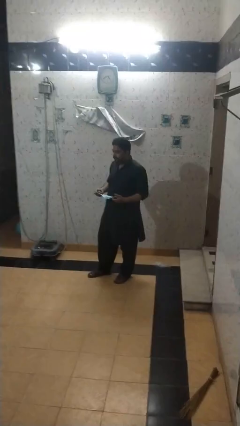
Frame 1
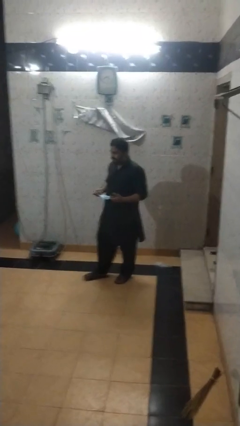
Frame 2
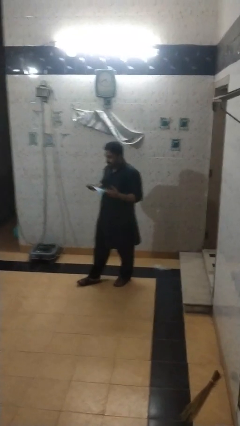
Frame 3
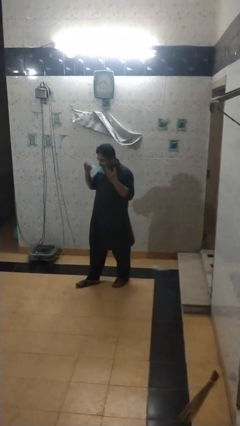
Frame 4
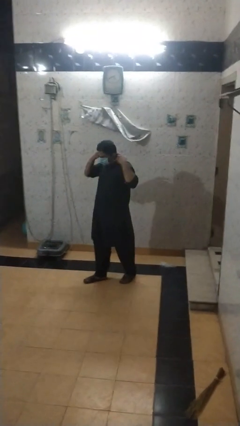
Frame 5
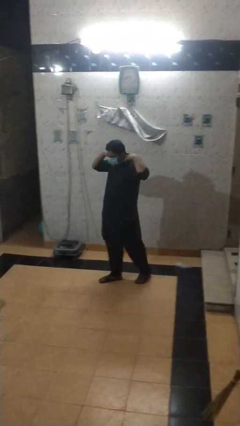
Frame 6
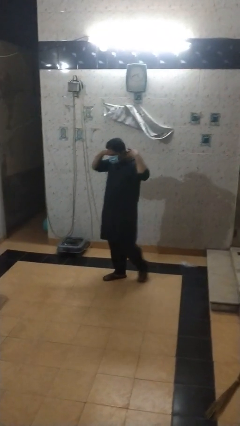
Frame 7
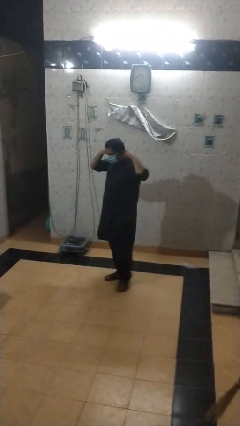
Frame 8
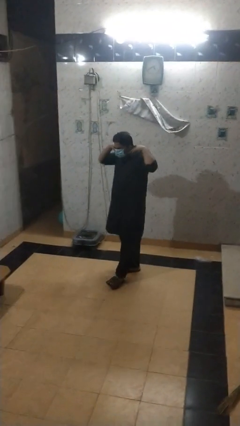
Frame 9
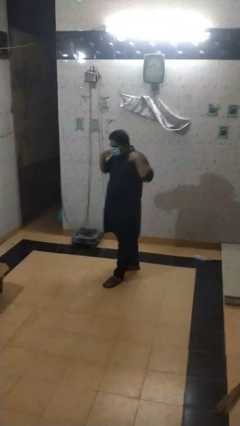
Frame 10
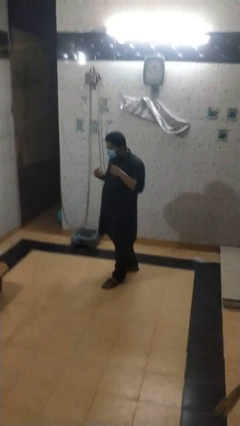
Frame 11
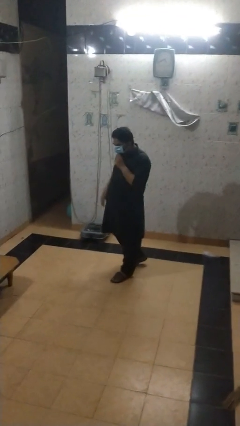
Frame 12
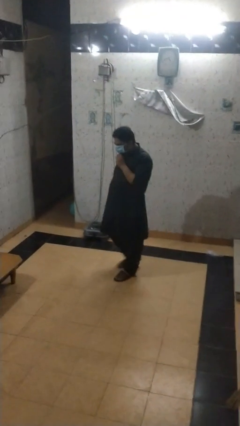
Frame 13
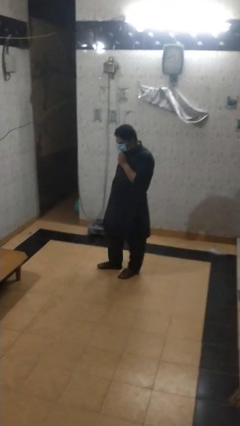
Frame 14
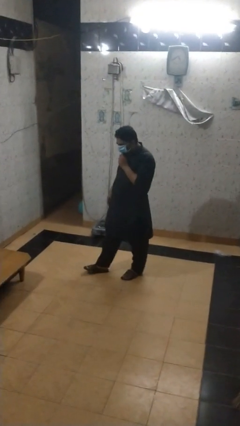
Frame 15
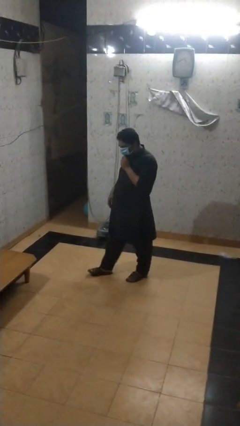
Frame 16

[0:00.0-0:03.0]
person puts on facemask

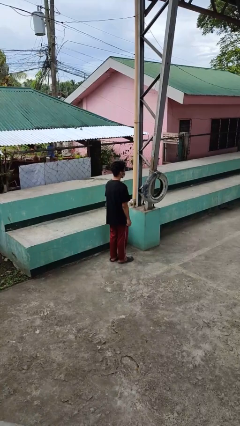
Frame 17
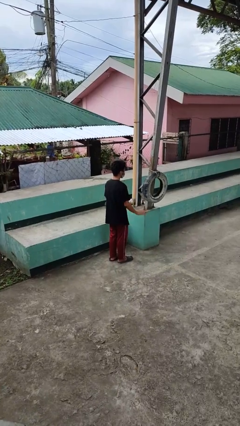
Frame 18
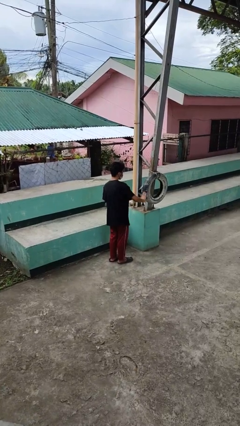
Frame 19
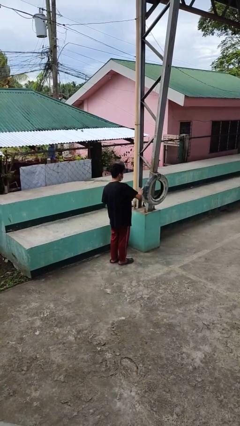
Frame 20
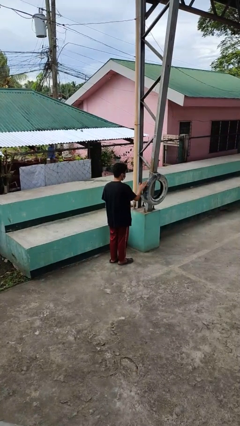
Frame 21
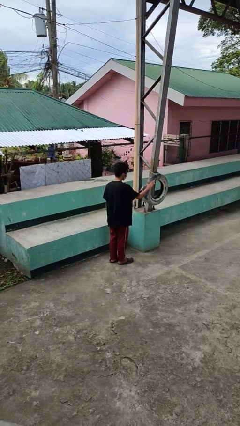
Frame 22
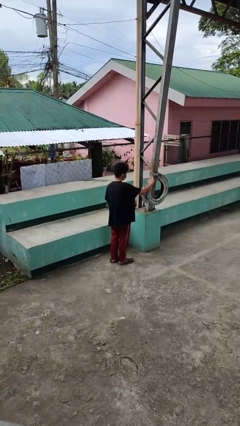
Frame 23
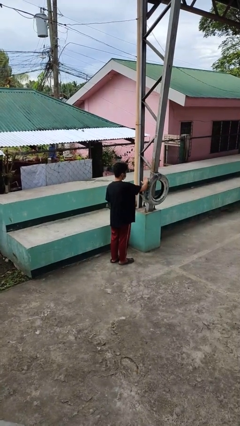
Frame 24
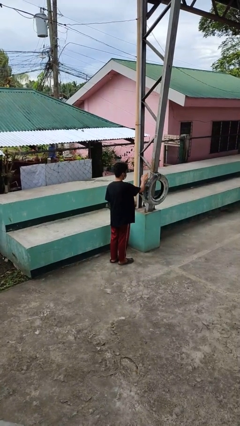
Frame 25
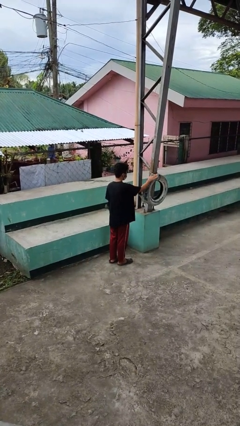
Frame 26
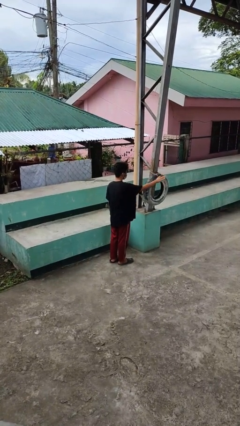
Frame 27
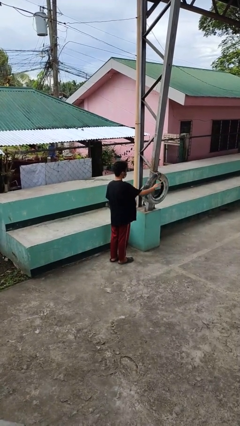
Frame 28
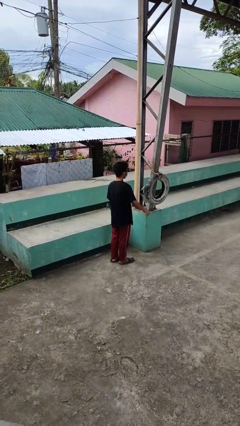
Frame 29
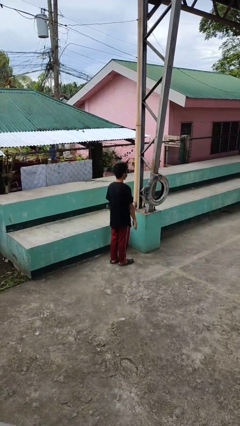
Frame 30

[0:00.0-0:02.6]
person waves hand over object

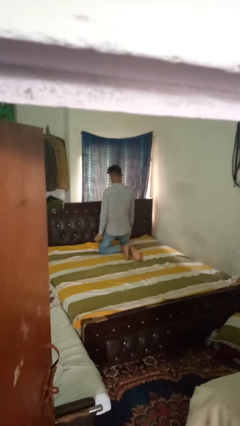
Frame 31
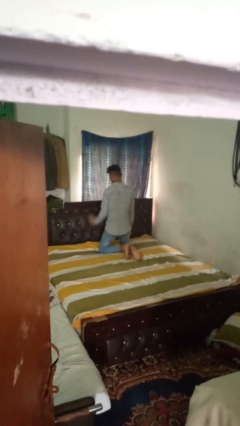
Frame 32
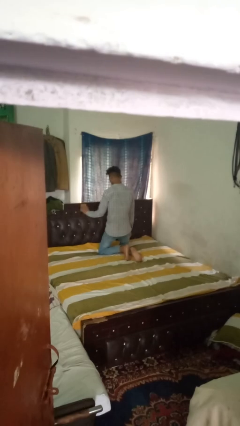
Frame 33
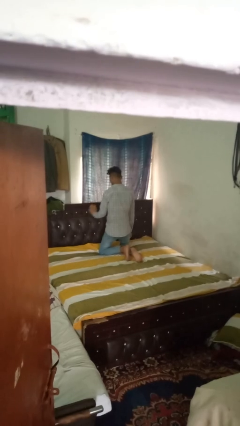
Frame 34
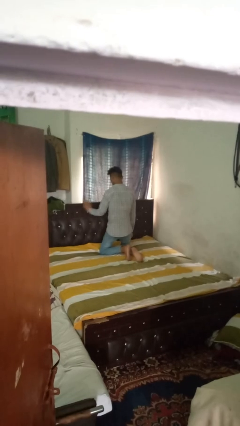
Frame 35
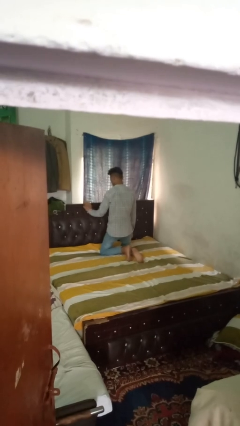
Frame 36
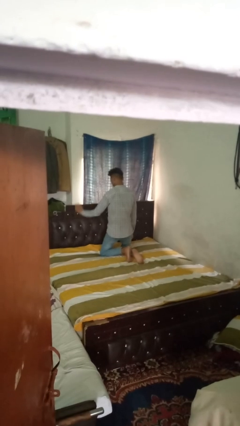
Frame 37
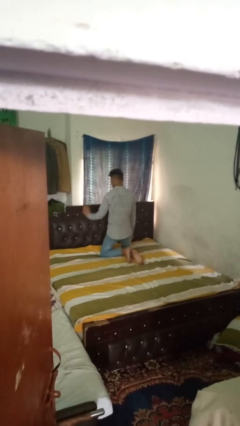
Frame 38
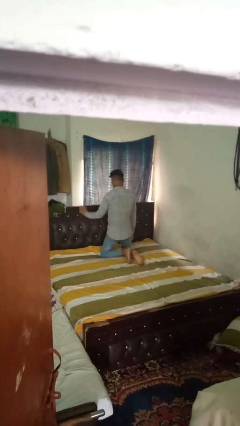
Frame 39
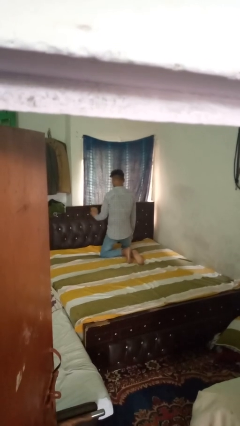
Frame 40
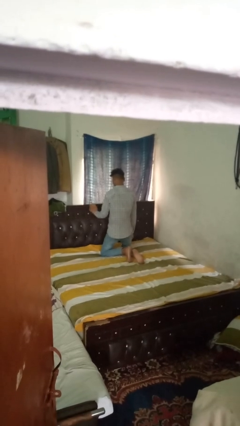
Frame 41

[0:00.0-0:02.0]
person dusts furniture

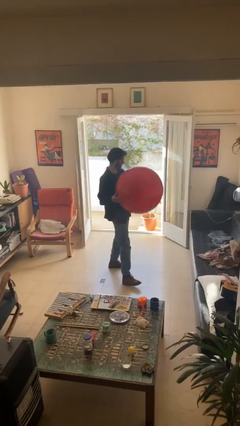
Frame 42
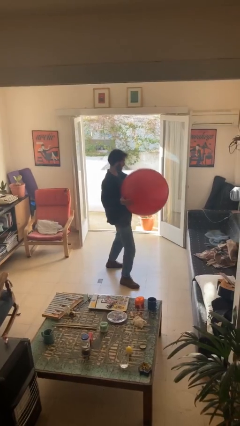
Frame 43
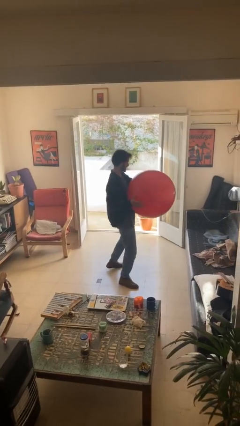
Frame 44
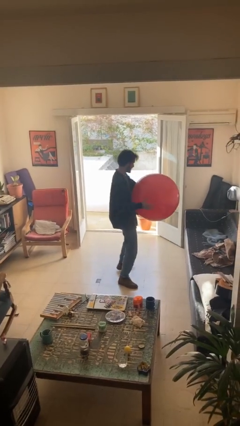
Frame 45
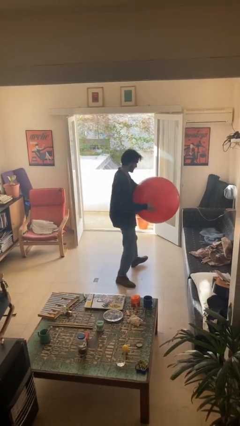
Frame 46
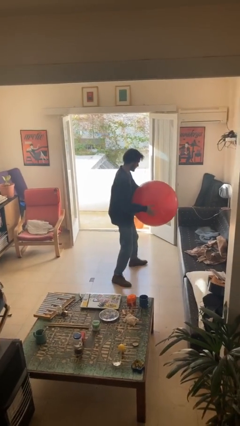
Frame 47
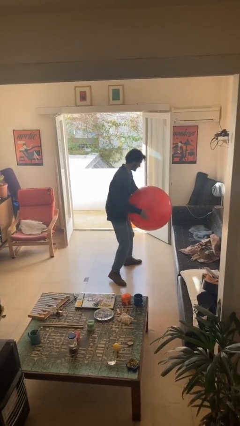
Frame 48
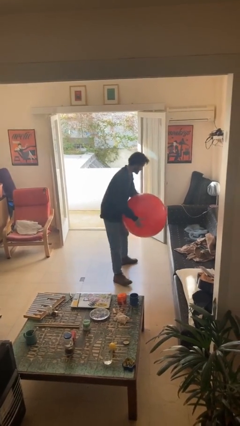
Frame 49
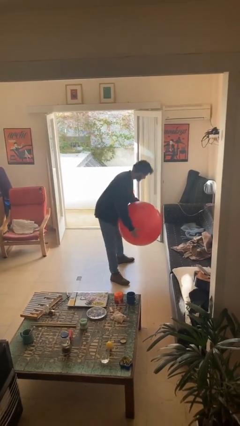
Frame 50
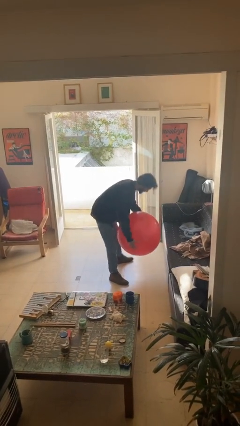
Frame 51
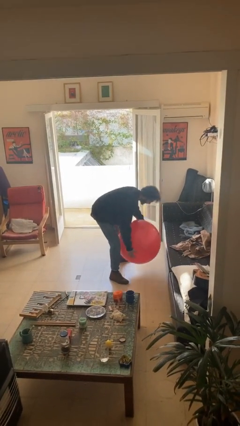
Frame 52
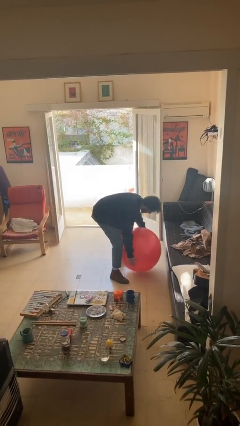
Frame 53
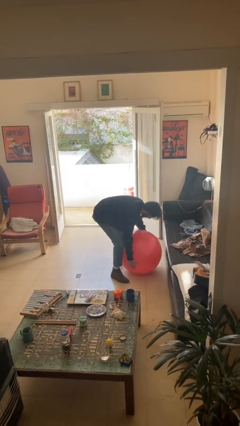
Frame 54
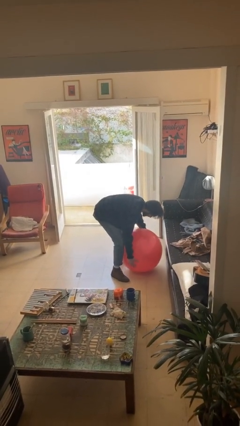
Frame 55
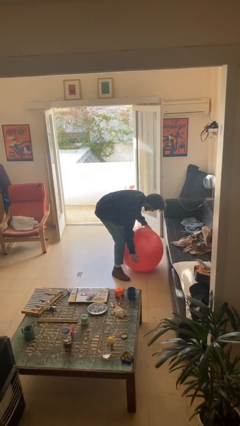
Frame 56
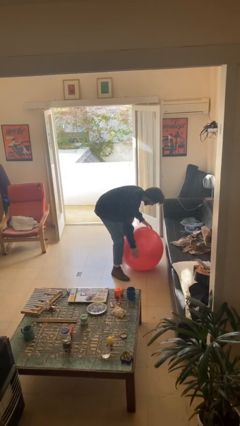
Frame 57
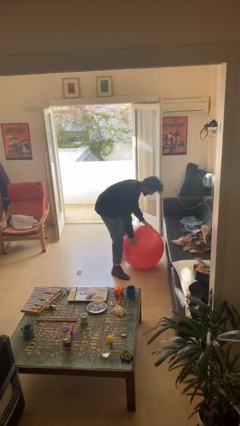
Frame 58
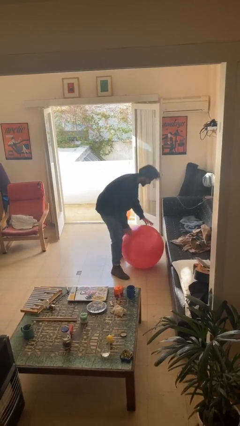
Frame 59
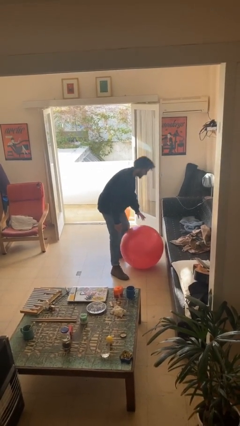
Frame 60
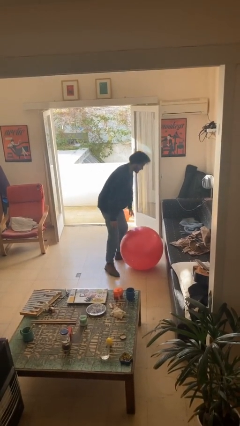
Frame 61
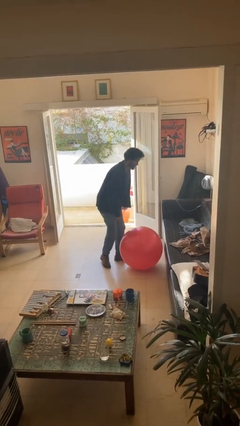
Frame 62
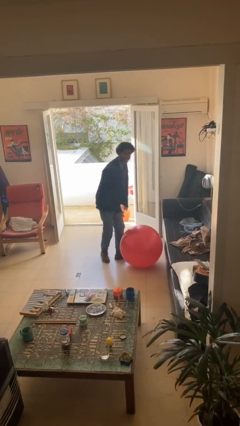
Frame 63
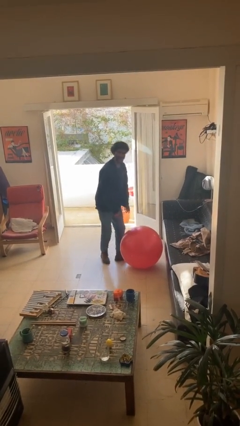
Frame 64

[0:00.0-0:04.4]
person puts down object on floor

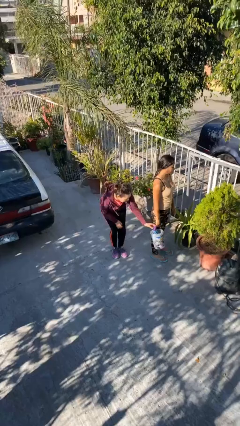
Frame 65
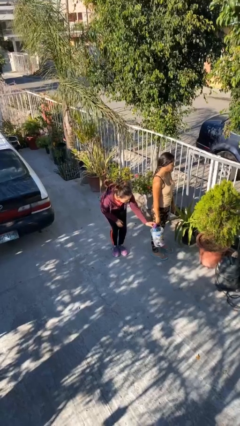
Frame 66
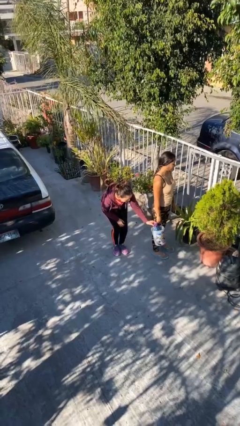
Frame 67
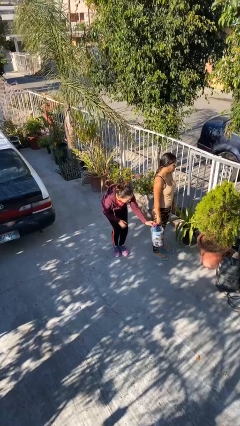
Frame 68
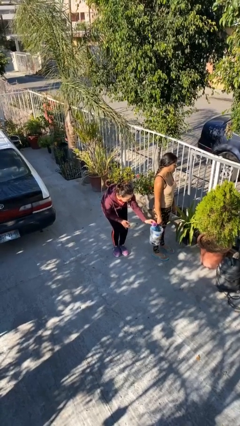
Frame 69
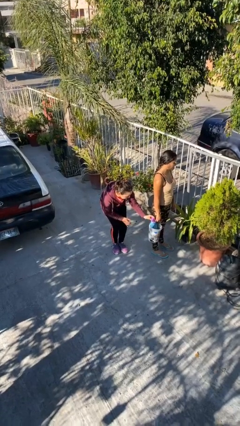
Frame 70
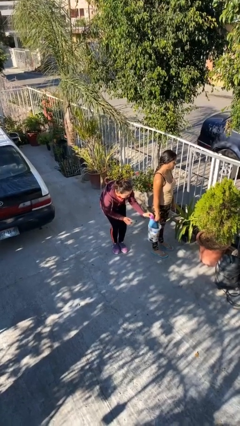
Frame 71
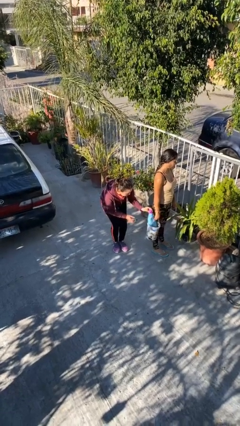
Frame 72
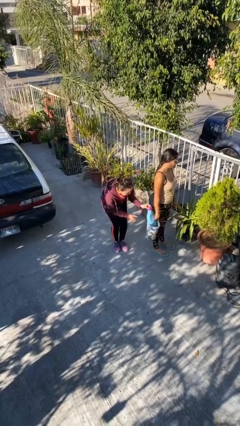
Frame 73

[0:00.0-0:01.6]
person steals object from person

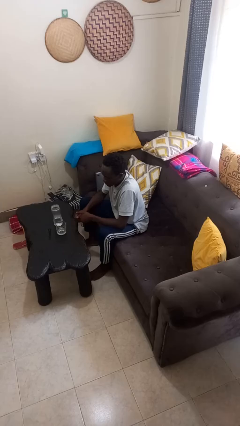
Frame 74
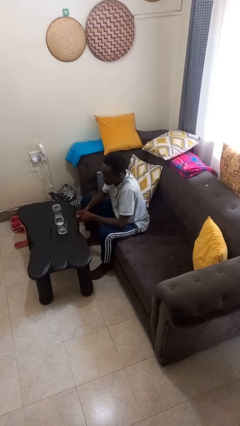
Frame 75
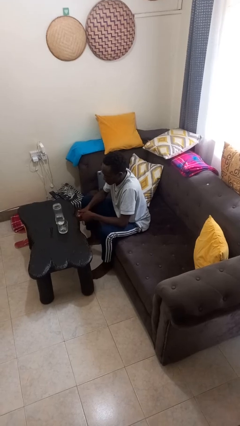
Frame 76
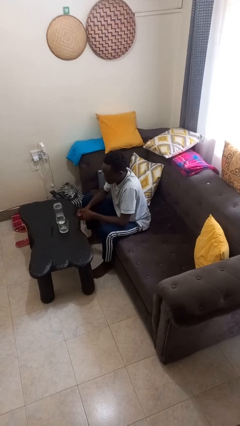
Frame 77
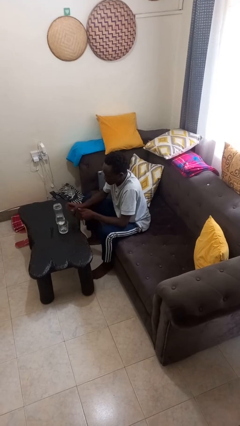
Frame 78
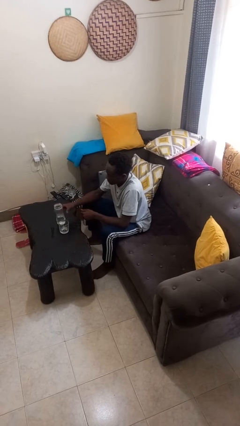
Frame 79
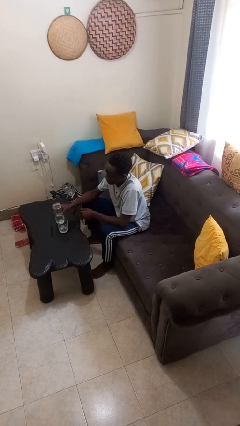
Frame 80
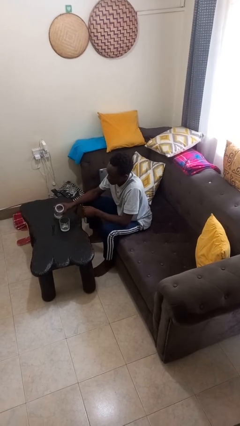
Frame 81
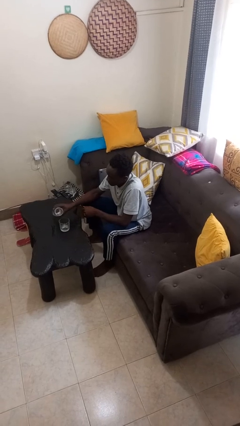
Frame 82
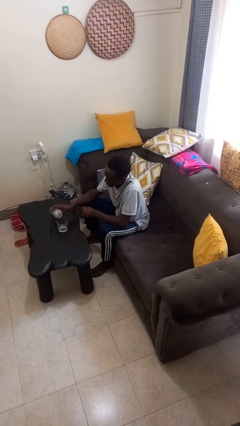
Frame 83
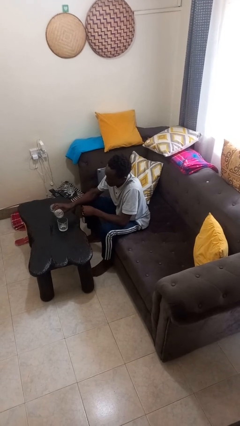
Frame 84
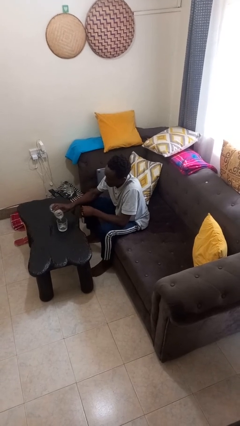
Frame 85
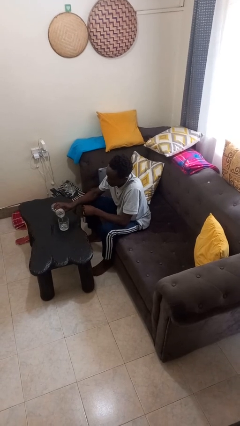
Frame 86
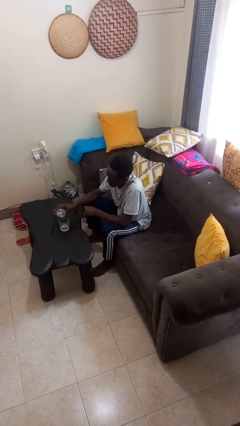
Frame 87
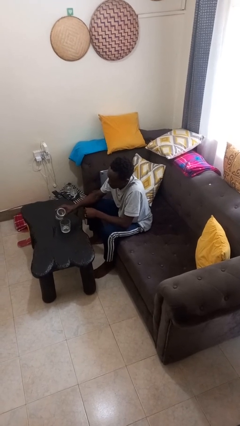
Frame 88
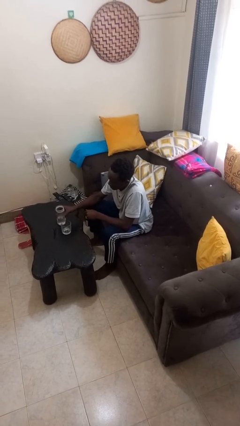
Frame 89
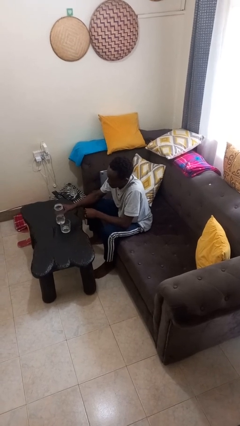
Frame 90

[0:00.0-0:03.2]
person pours liquid into cup
